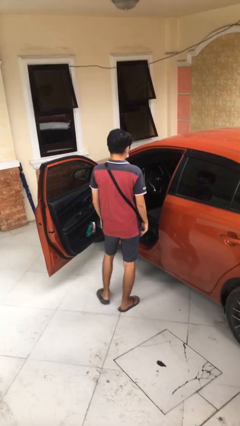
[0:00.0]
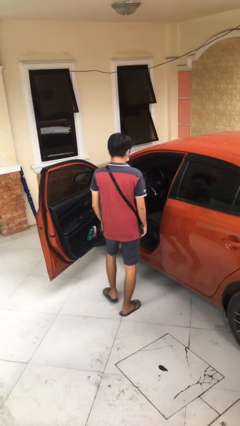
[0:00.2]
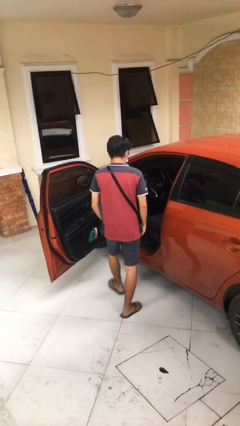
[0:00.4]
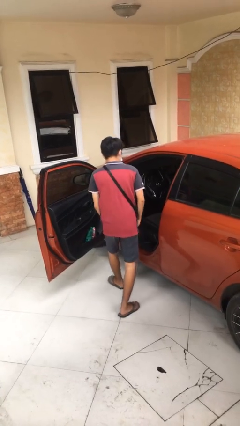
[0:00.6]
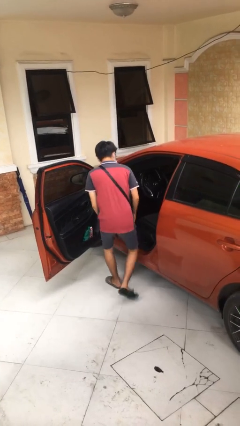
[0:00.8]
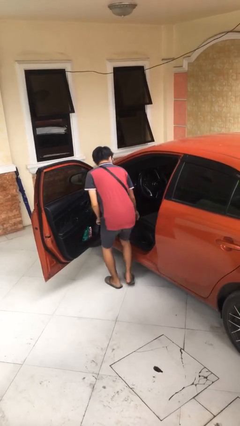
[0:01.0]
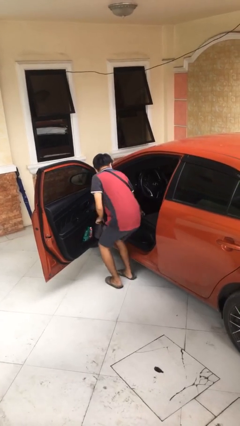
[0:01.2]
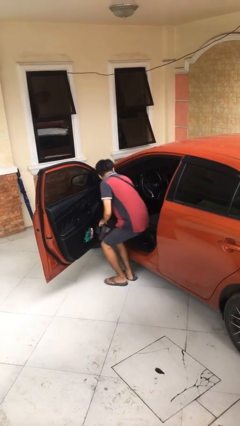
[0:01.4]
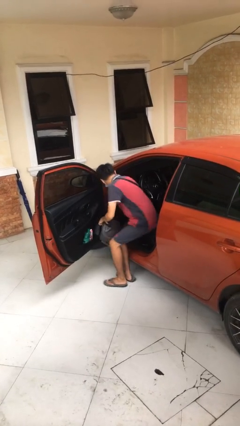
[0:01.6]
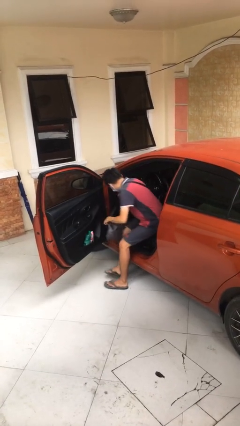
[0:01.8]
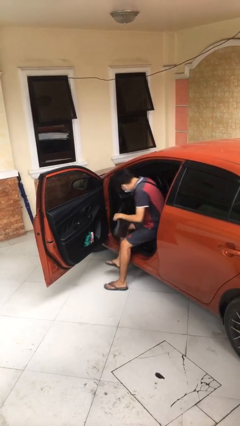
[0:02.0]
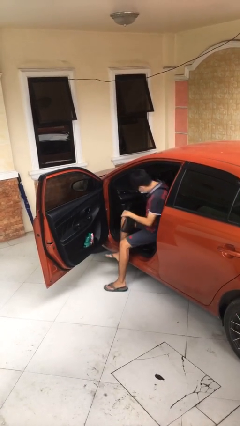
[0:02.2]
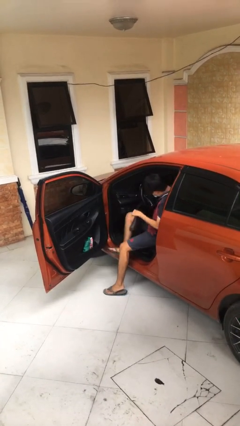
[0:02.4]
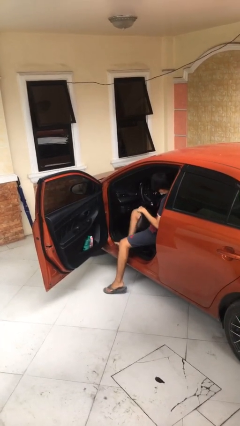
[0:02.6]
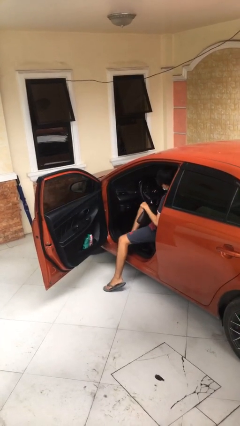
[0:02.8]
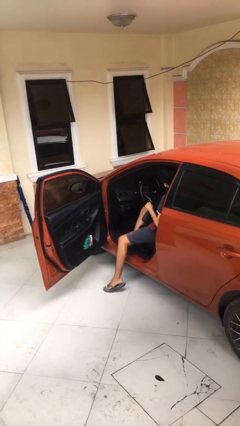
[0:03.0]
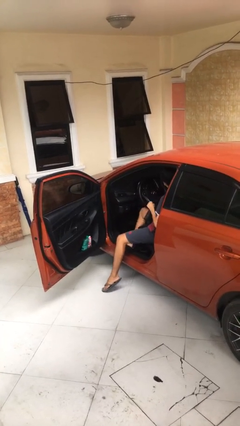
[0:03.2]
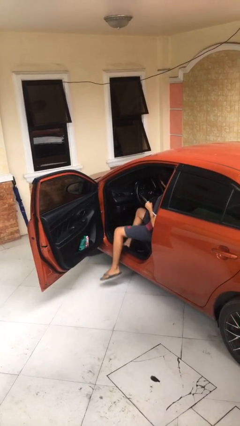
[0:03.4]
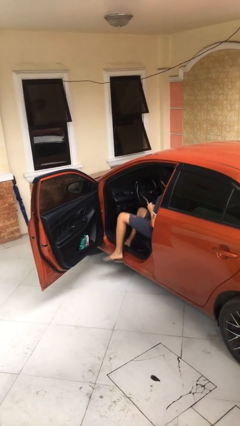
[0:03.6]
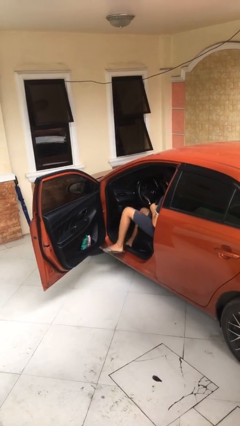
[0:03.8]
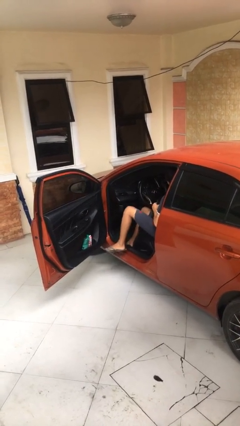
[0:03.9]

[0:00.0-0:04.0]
person enters car

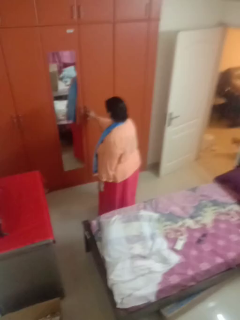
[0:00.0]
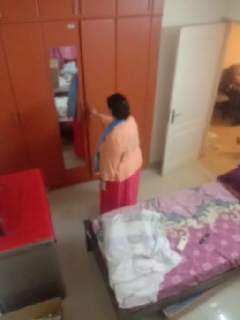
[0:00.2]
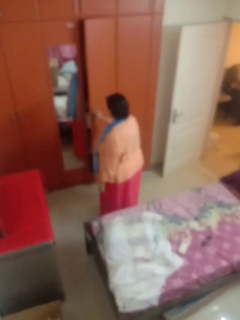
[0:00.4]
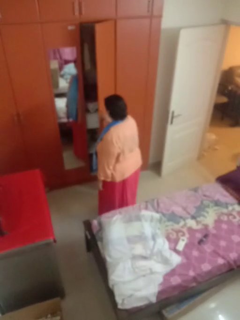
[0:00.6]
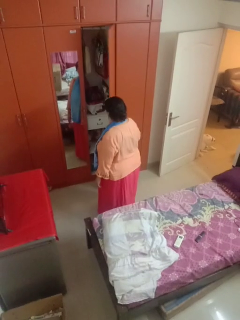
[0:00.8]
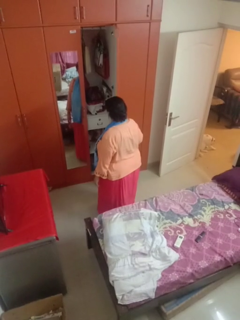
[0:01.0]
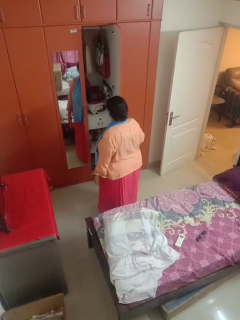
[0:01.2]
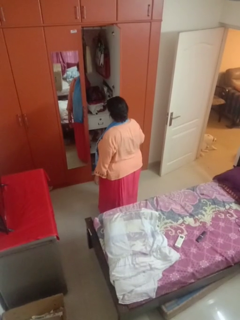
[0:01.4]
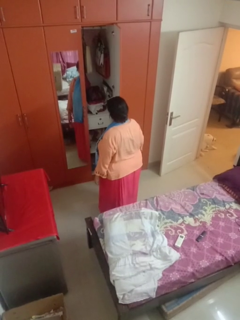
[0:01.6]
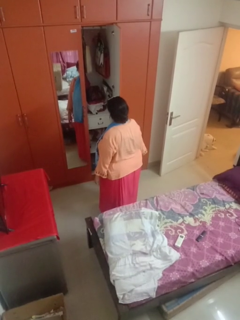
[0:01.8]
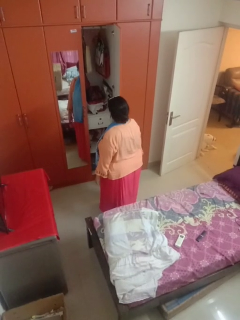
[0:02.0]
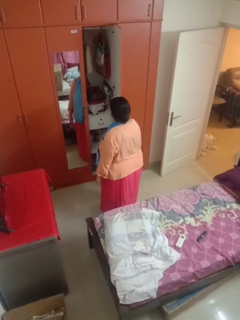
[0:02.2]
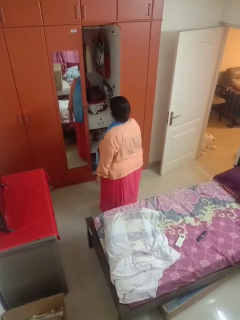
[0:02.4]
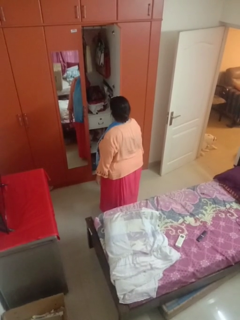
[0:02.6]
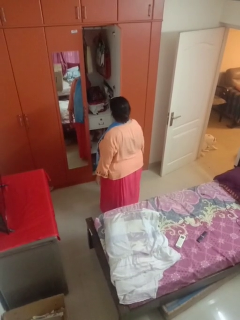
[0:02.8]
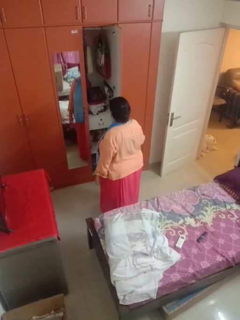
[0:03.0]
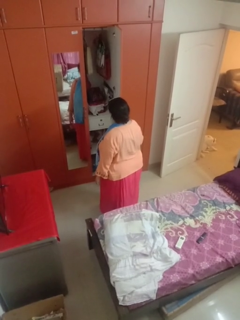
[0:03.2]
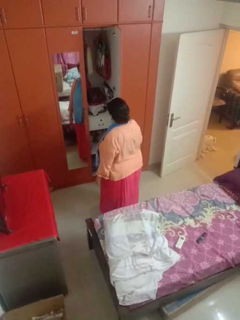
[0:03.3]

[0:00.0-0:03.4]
person opens closet door

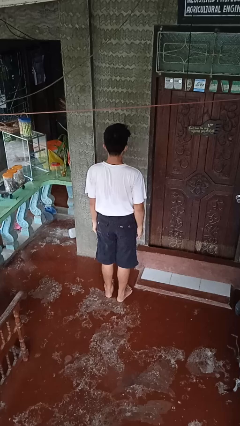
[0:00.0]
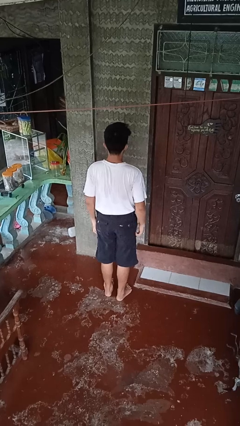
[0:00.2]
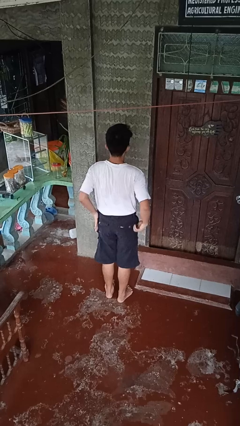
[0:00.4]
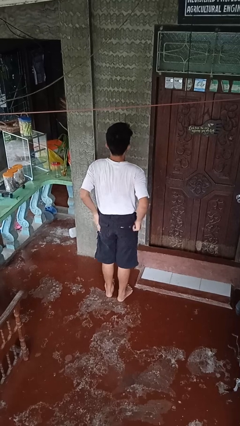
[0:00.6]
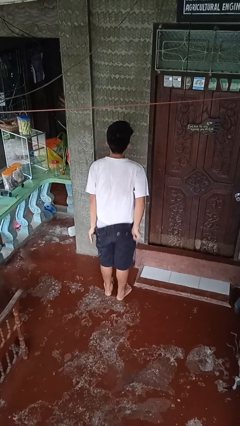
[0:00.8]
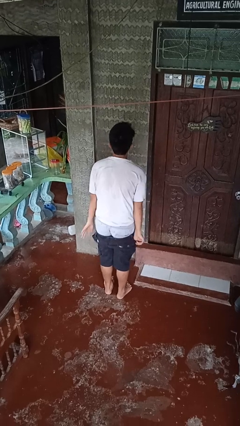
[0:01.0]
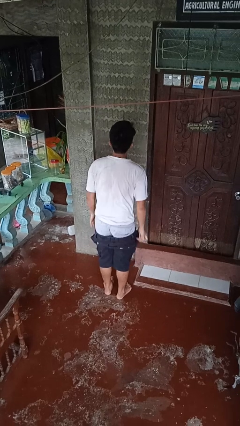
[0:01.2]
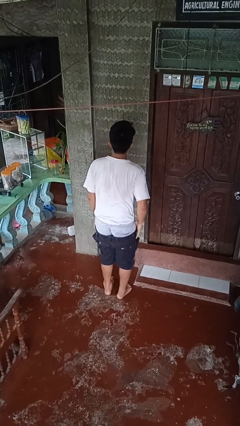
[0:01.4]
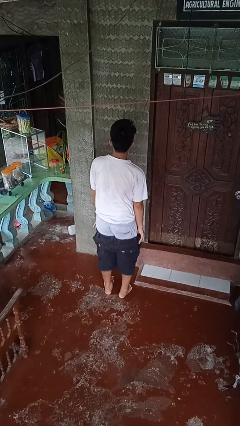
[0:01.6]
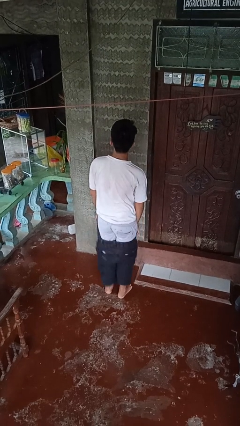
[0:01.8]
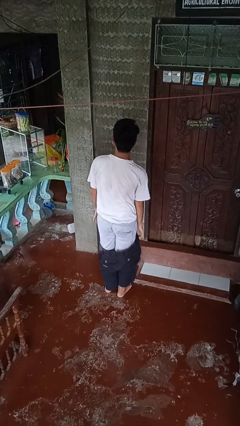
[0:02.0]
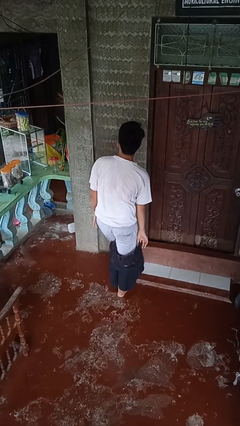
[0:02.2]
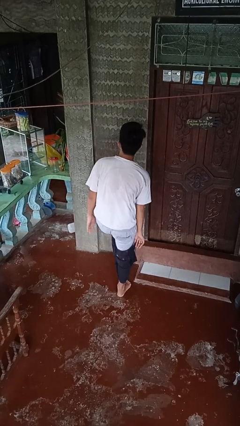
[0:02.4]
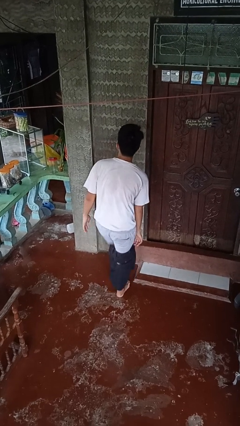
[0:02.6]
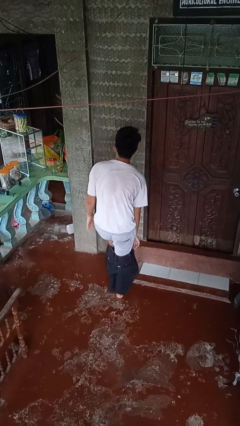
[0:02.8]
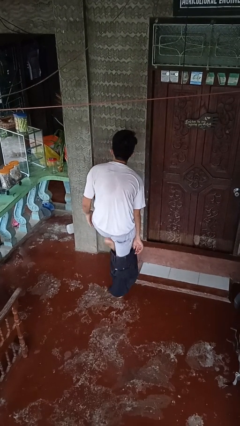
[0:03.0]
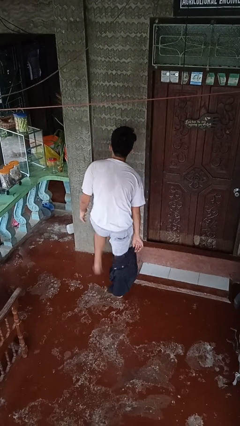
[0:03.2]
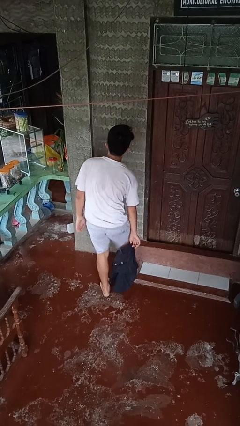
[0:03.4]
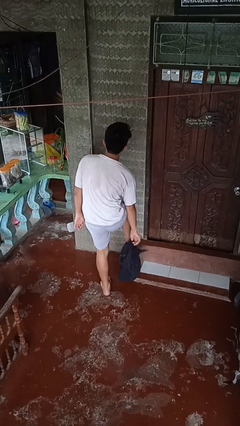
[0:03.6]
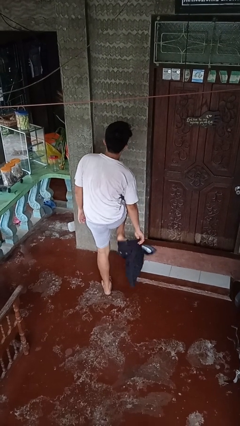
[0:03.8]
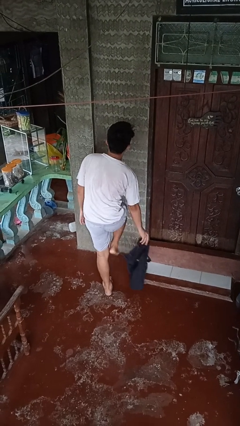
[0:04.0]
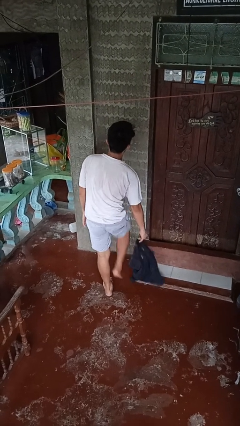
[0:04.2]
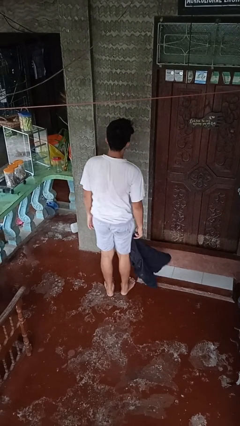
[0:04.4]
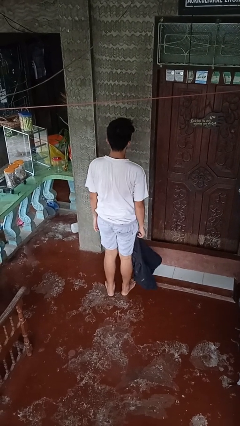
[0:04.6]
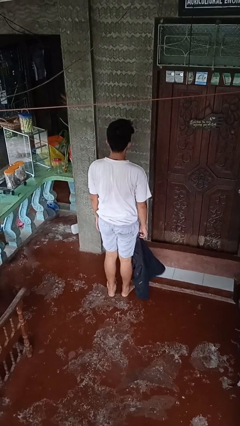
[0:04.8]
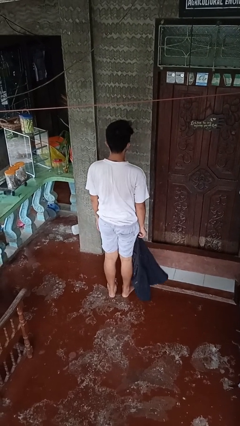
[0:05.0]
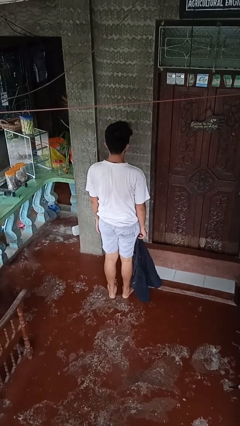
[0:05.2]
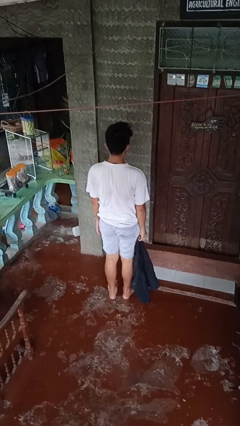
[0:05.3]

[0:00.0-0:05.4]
person takes off pants

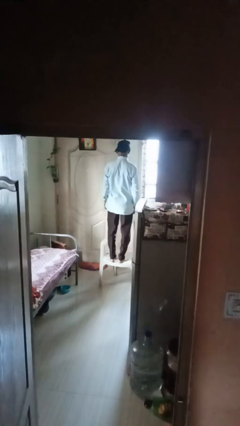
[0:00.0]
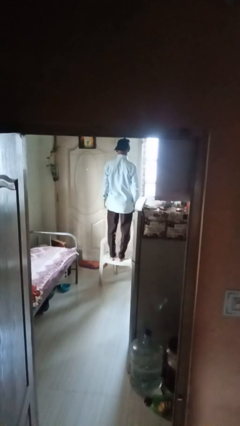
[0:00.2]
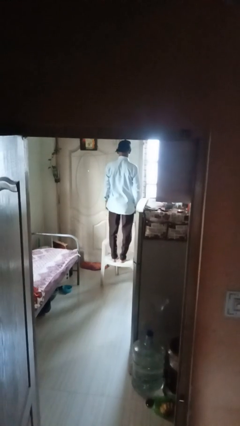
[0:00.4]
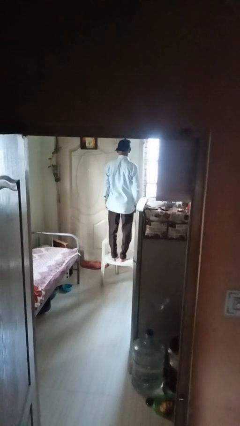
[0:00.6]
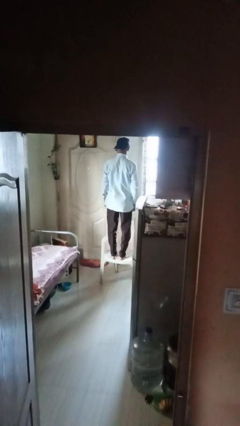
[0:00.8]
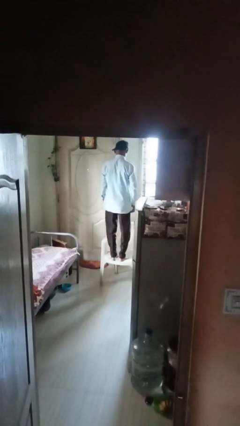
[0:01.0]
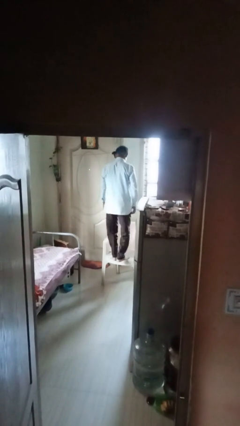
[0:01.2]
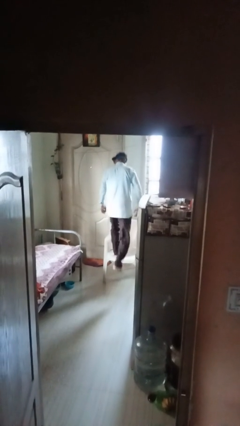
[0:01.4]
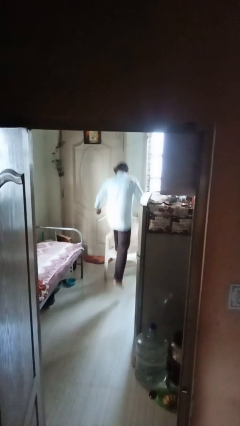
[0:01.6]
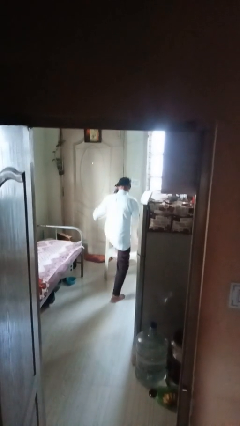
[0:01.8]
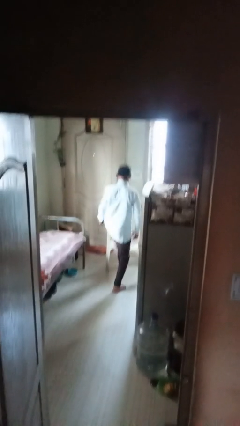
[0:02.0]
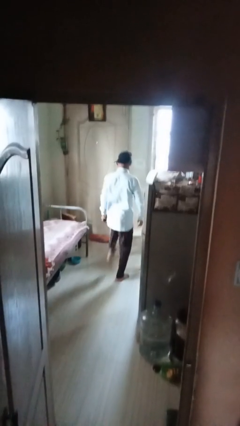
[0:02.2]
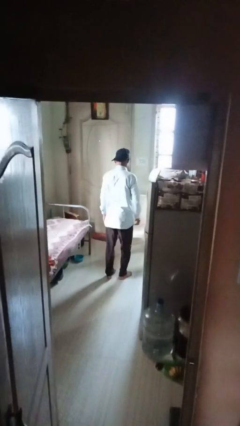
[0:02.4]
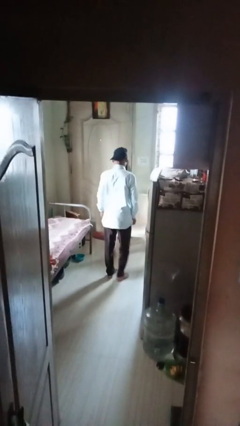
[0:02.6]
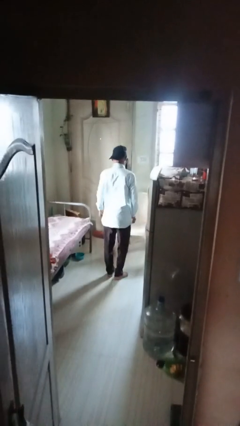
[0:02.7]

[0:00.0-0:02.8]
person climbs off chair

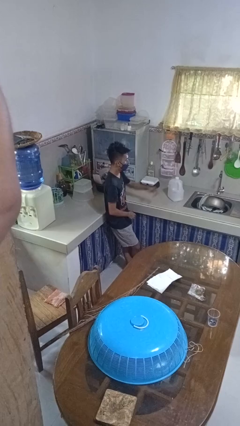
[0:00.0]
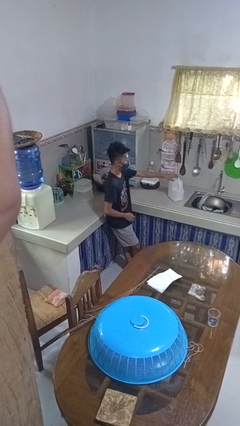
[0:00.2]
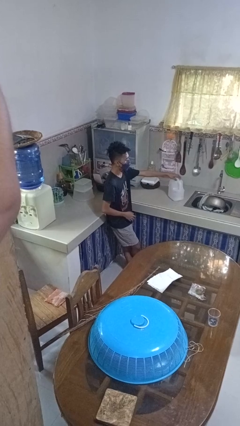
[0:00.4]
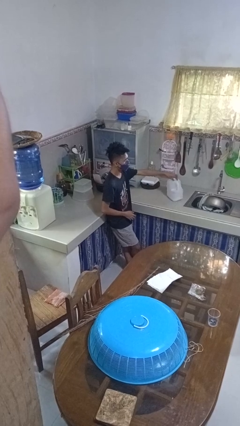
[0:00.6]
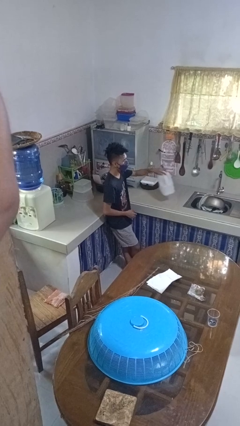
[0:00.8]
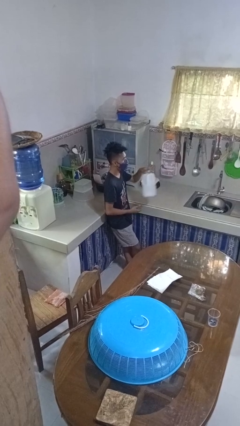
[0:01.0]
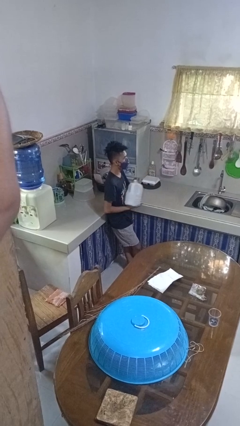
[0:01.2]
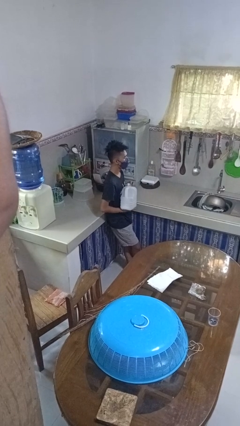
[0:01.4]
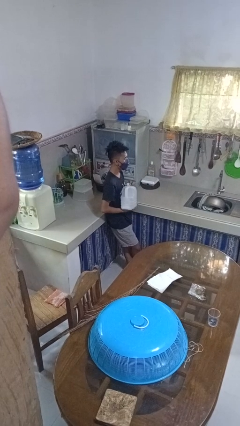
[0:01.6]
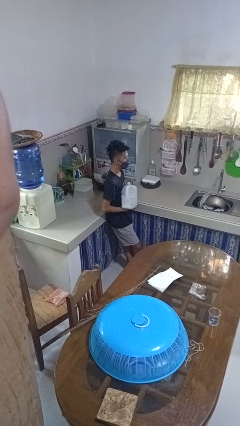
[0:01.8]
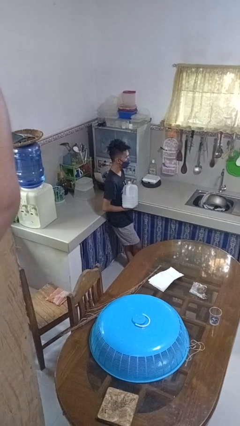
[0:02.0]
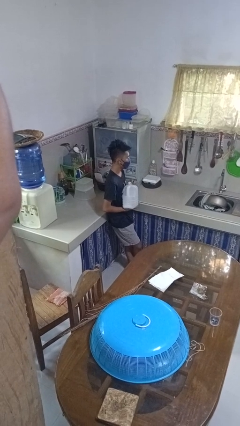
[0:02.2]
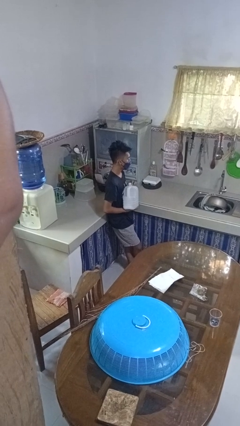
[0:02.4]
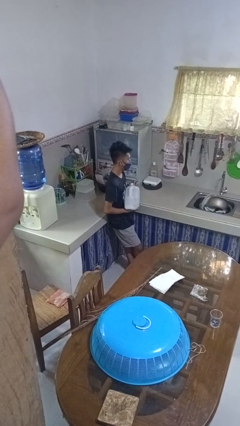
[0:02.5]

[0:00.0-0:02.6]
person picks up object from countertop

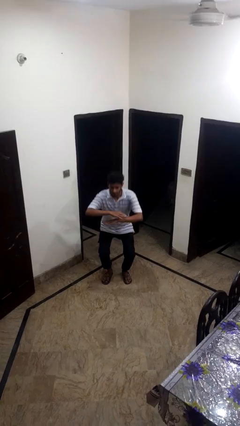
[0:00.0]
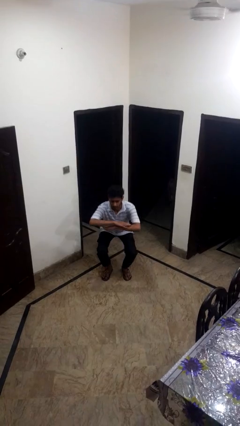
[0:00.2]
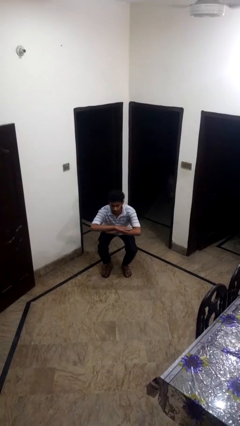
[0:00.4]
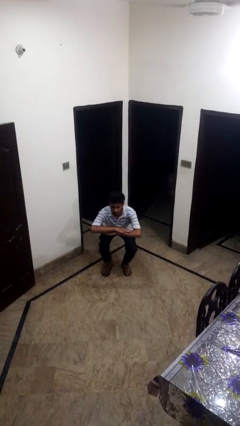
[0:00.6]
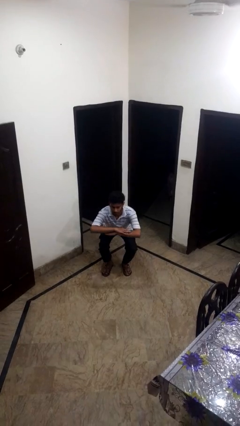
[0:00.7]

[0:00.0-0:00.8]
person squats
